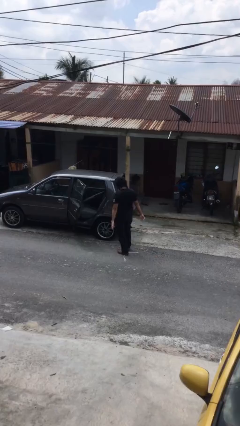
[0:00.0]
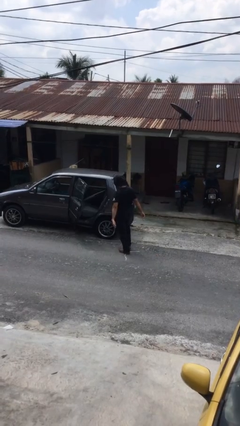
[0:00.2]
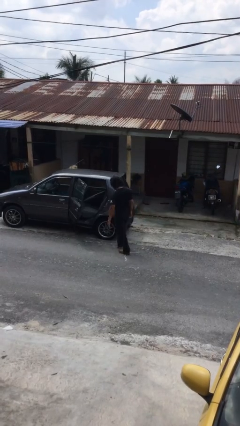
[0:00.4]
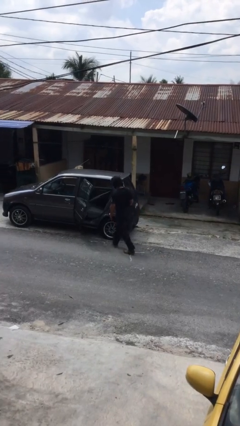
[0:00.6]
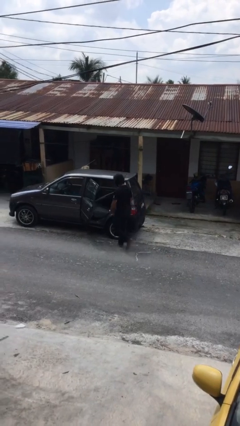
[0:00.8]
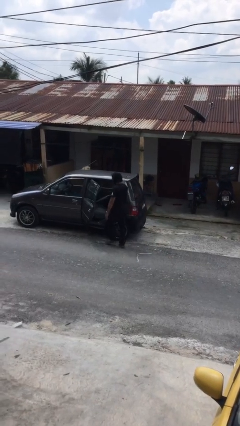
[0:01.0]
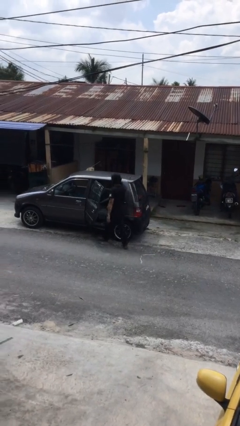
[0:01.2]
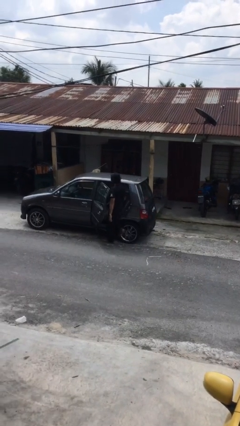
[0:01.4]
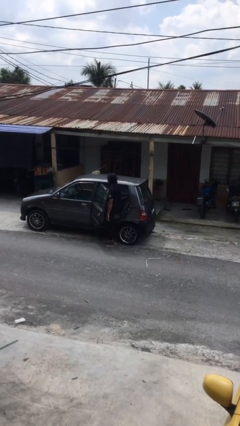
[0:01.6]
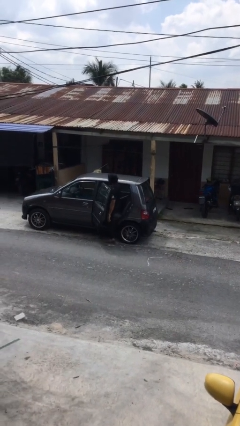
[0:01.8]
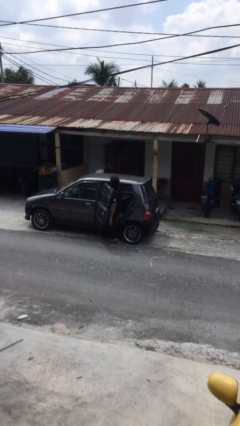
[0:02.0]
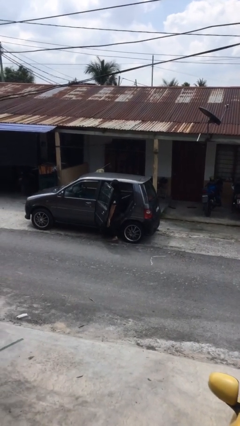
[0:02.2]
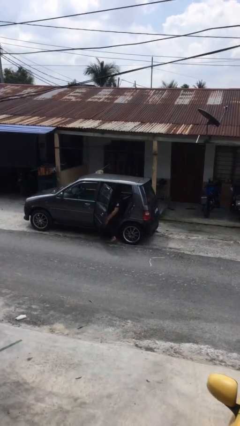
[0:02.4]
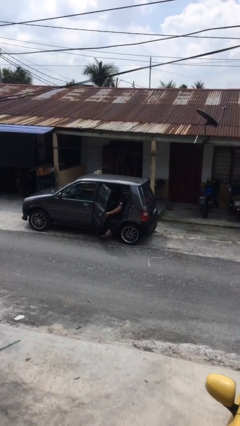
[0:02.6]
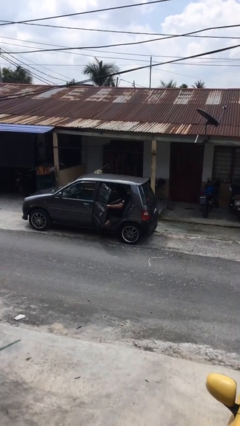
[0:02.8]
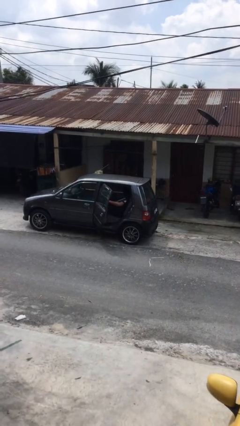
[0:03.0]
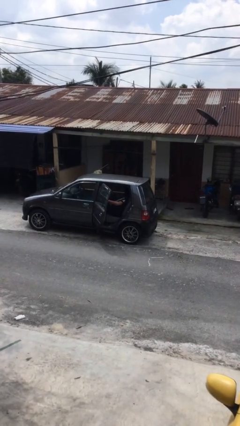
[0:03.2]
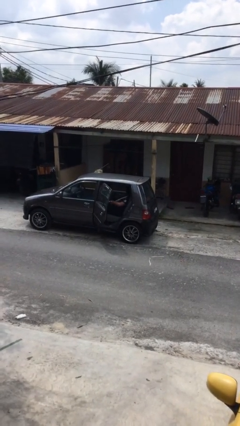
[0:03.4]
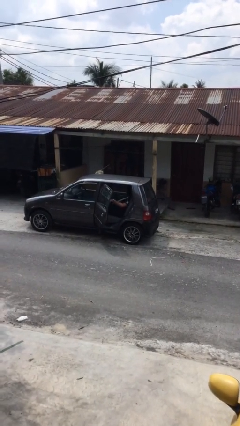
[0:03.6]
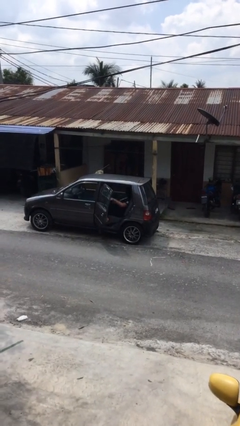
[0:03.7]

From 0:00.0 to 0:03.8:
person enters car

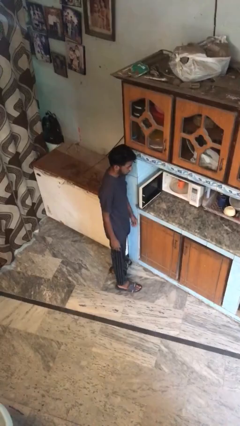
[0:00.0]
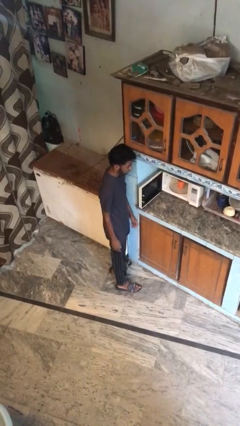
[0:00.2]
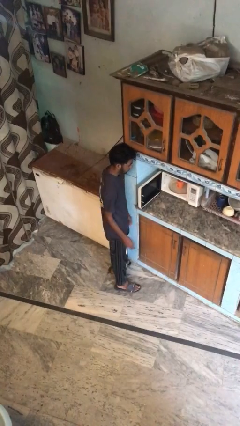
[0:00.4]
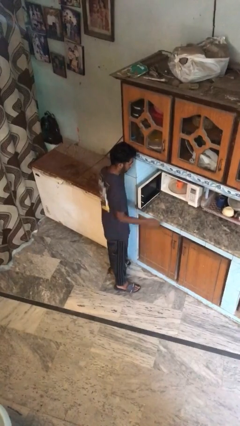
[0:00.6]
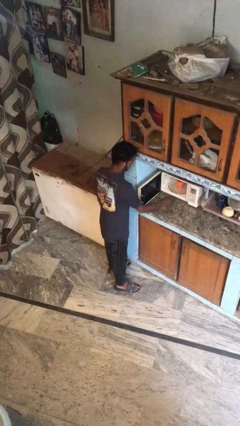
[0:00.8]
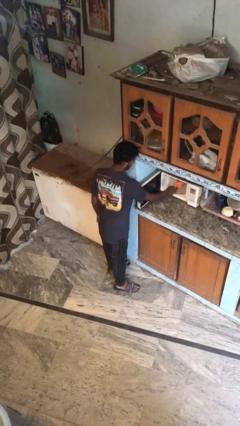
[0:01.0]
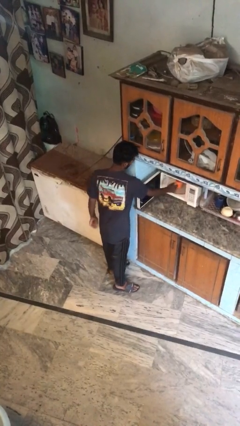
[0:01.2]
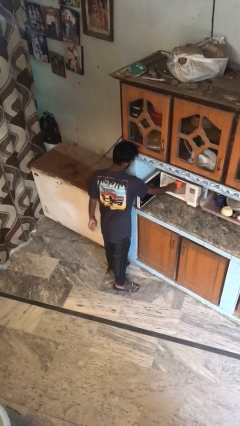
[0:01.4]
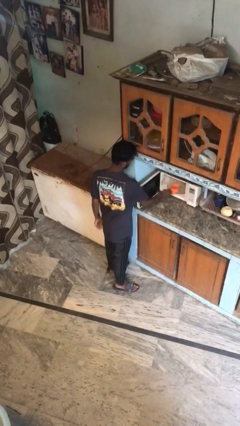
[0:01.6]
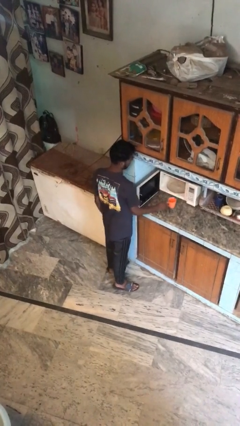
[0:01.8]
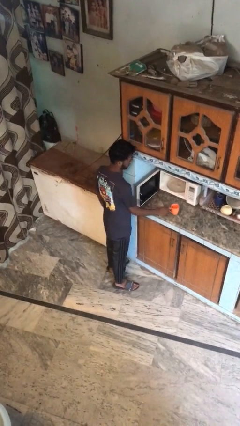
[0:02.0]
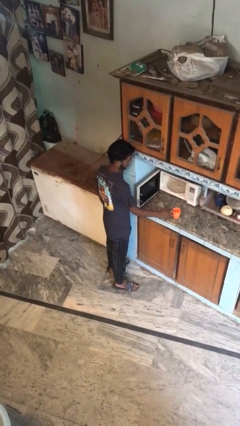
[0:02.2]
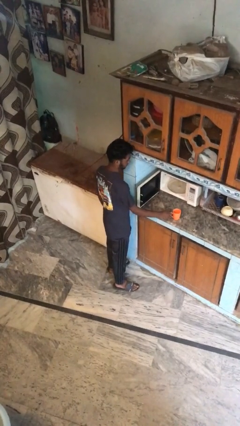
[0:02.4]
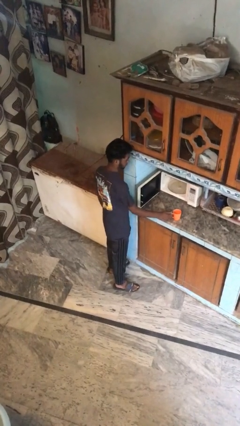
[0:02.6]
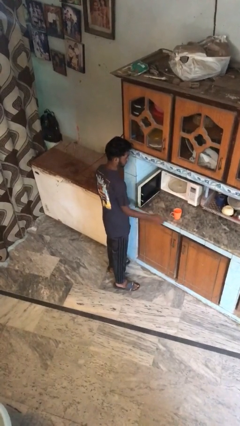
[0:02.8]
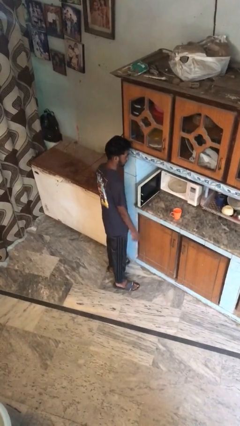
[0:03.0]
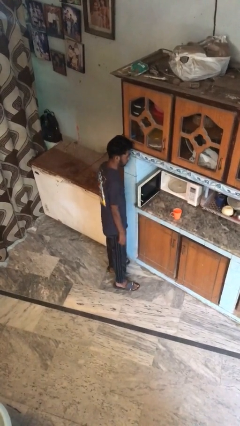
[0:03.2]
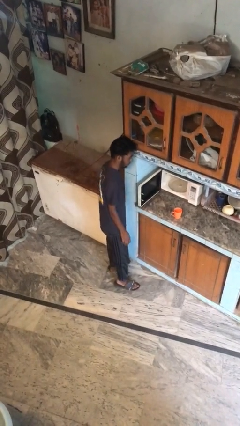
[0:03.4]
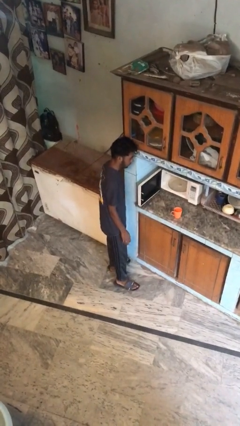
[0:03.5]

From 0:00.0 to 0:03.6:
person takes object from microwave

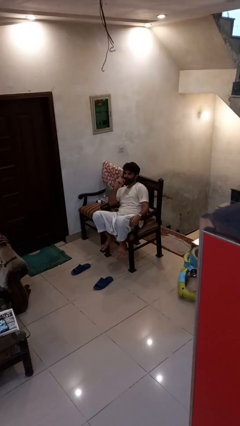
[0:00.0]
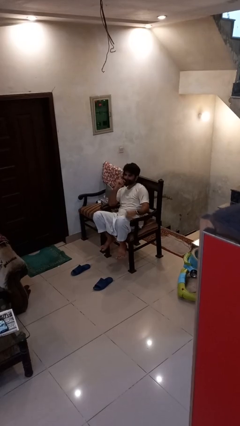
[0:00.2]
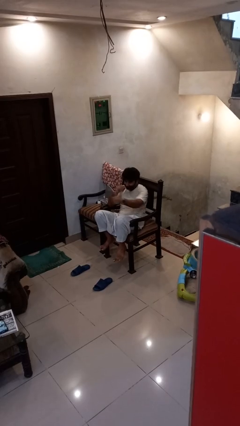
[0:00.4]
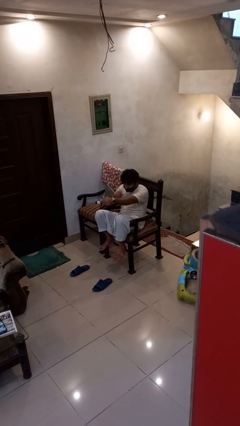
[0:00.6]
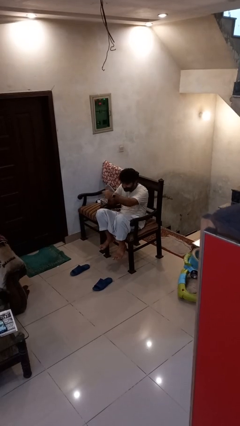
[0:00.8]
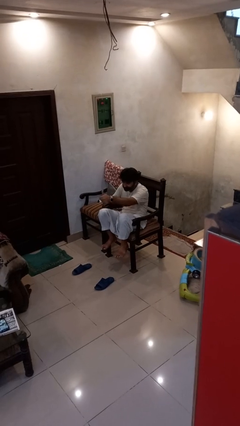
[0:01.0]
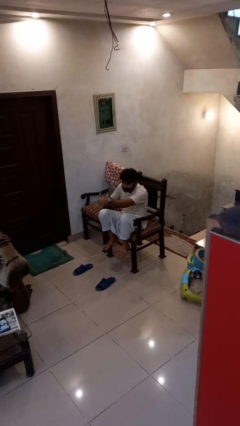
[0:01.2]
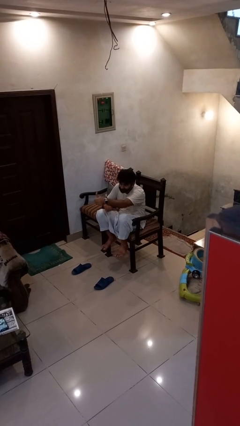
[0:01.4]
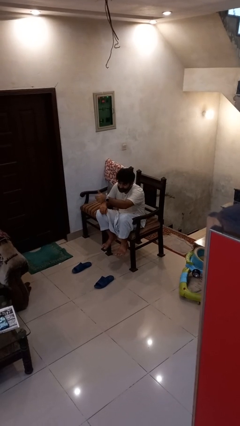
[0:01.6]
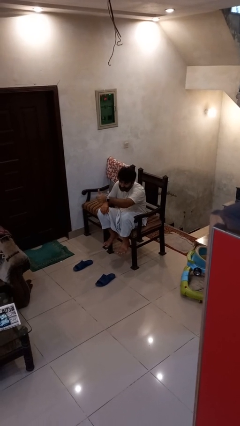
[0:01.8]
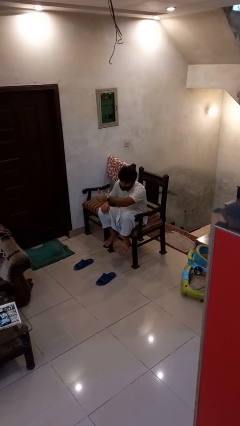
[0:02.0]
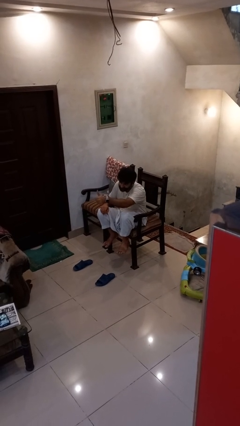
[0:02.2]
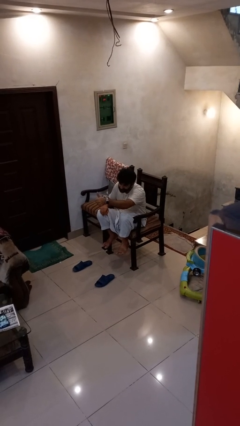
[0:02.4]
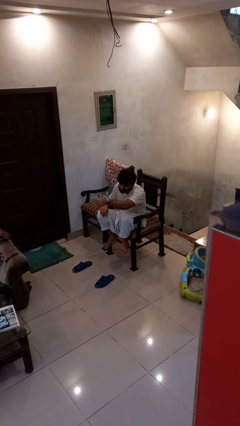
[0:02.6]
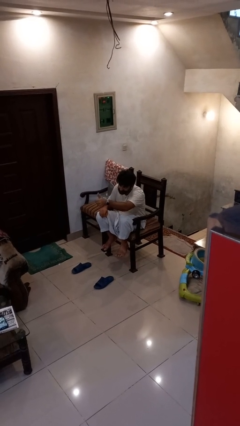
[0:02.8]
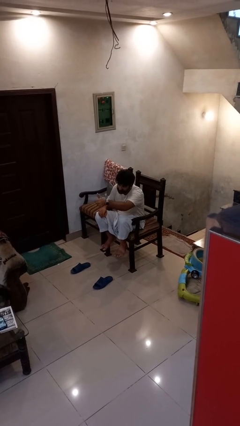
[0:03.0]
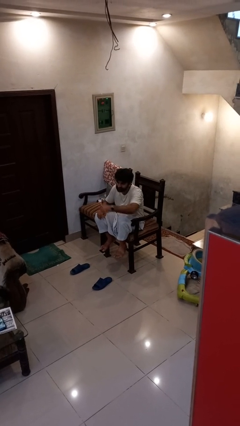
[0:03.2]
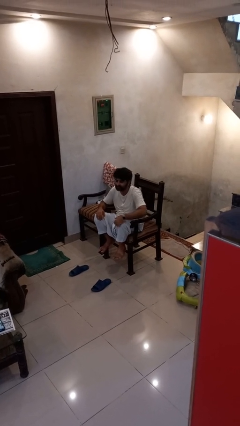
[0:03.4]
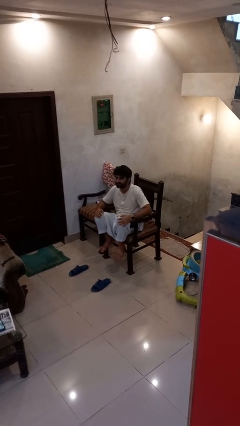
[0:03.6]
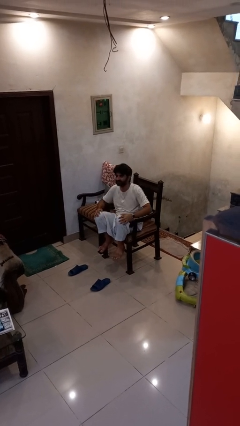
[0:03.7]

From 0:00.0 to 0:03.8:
person gestures thumbs up

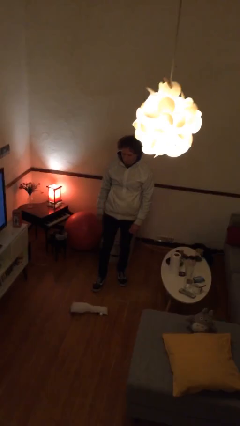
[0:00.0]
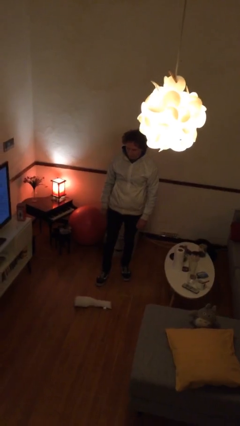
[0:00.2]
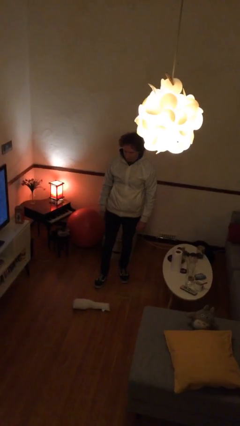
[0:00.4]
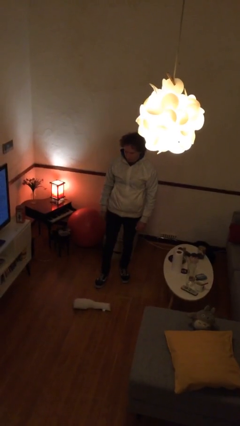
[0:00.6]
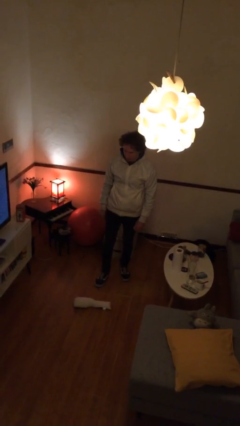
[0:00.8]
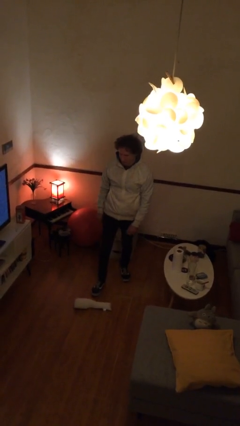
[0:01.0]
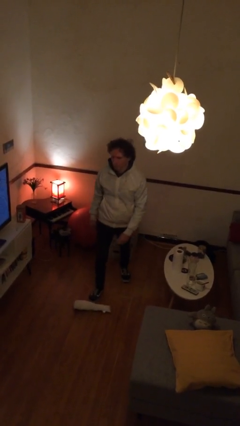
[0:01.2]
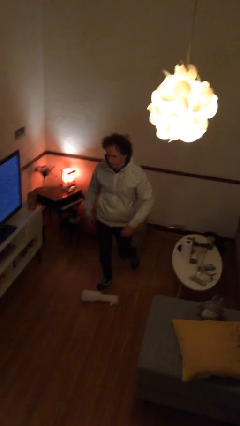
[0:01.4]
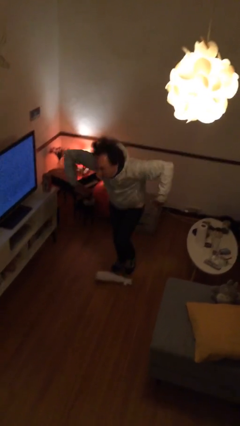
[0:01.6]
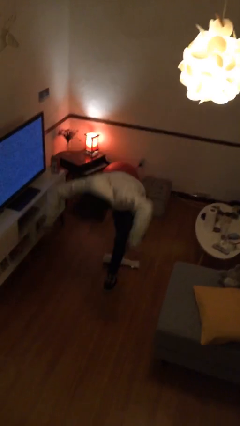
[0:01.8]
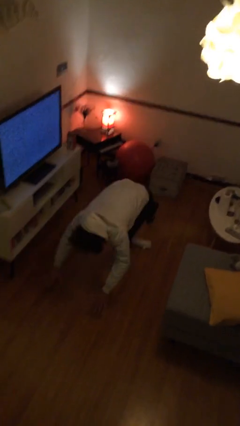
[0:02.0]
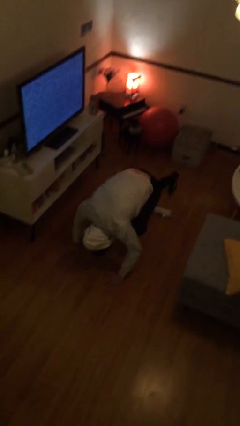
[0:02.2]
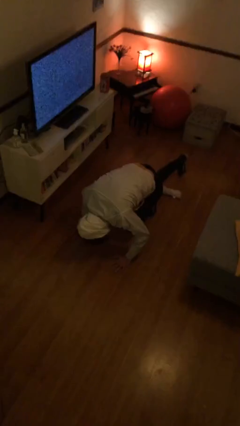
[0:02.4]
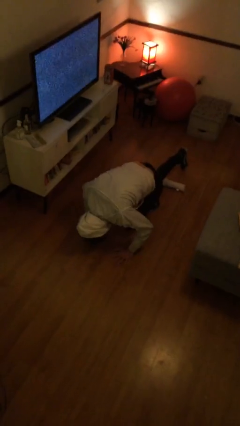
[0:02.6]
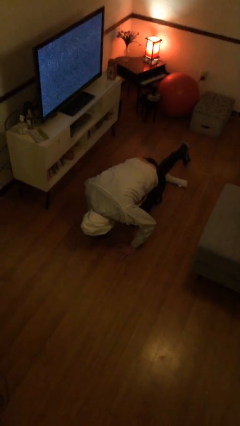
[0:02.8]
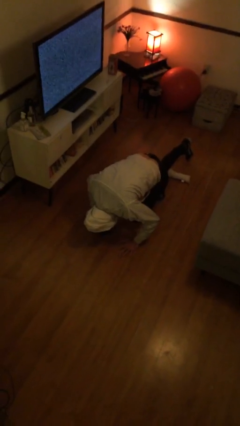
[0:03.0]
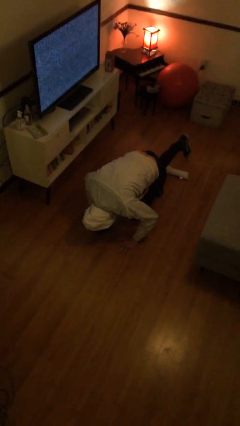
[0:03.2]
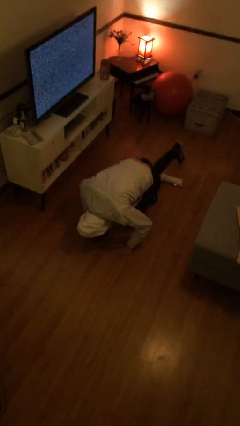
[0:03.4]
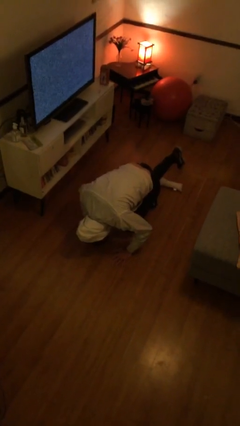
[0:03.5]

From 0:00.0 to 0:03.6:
person trips on object on floor

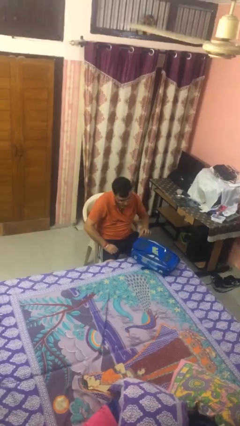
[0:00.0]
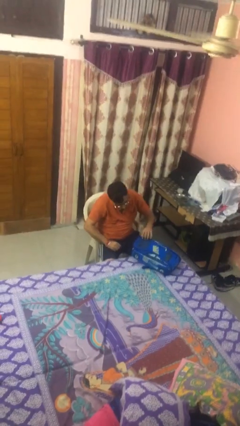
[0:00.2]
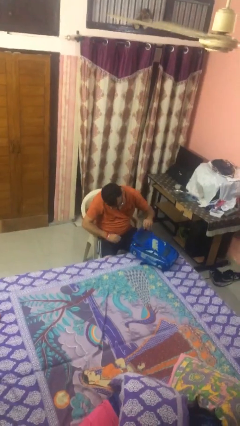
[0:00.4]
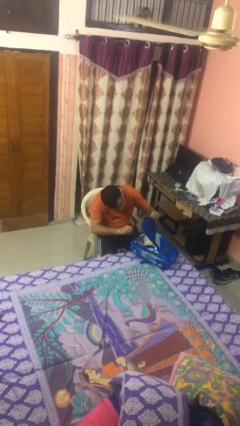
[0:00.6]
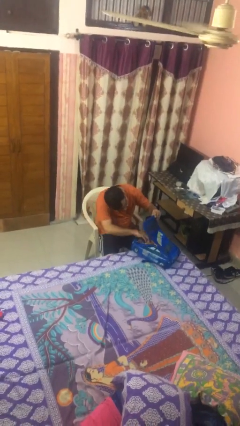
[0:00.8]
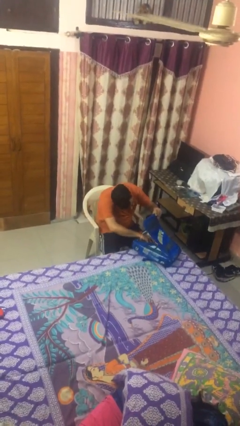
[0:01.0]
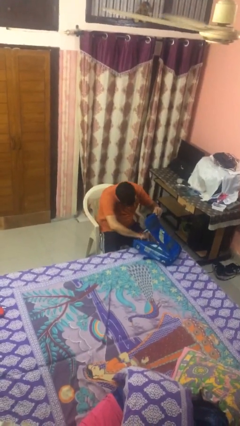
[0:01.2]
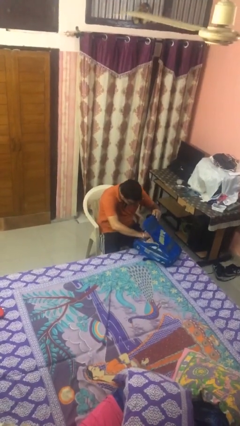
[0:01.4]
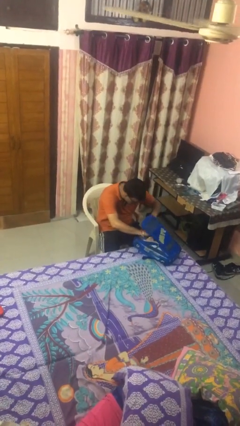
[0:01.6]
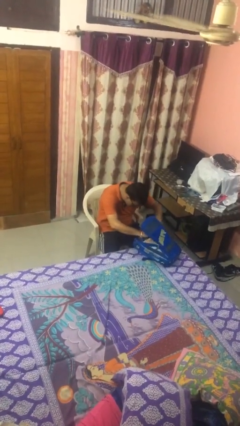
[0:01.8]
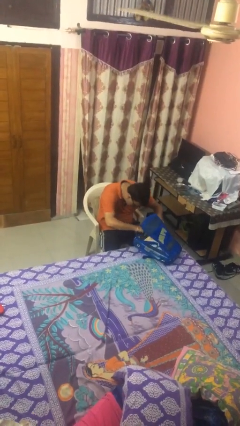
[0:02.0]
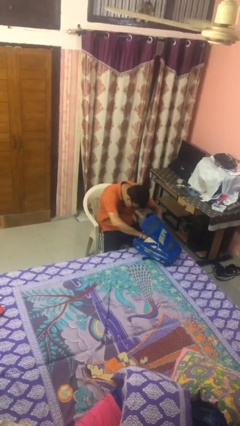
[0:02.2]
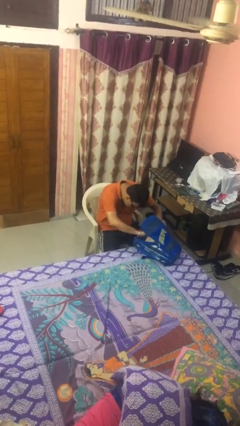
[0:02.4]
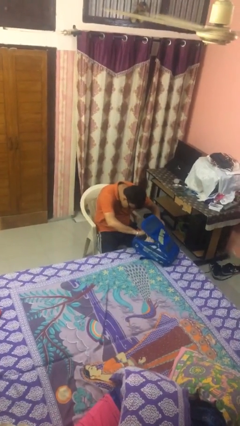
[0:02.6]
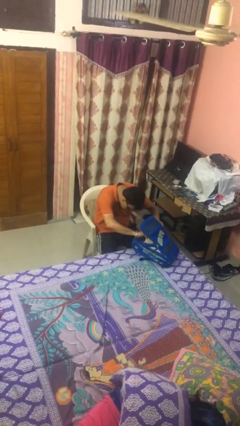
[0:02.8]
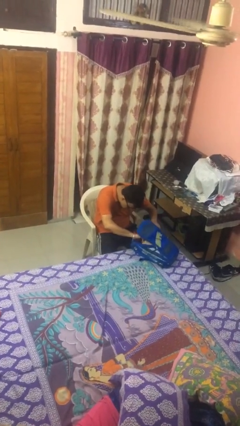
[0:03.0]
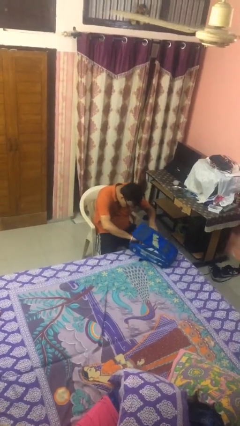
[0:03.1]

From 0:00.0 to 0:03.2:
person searches in bag
